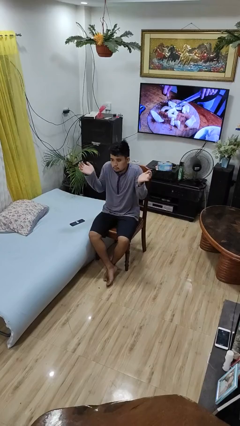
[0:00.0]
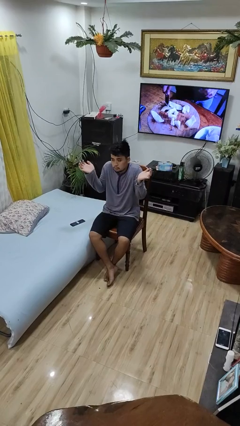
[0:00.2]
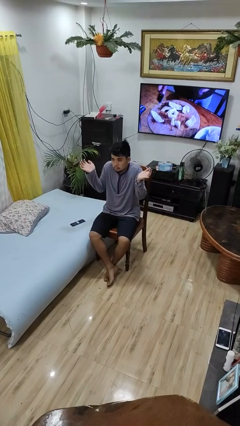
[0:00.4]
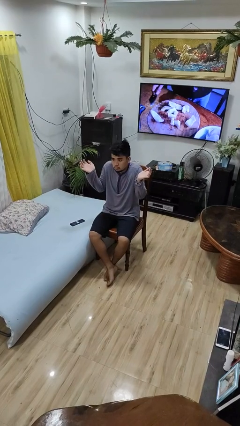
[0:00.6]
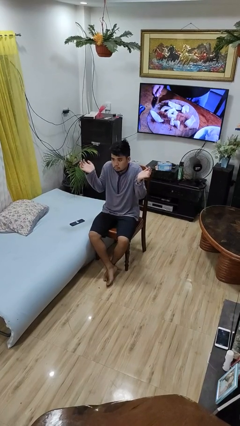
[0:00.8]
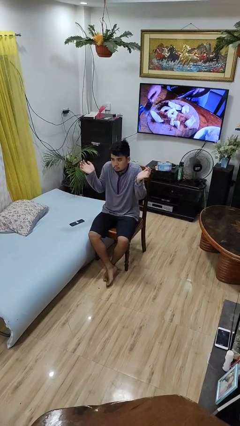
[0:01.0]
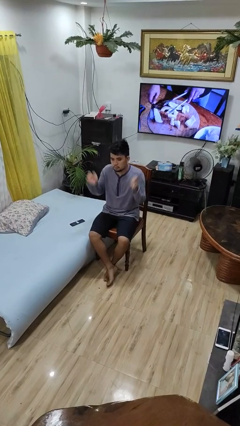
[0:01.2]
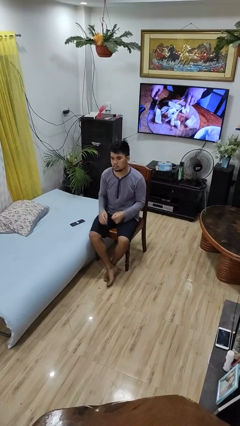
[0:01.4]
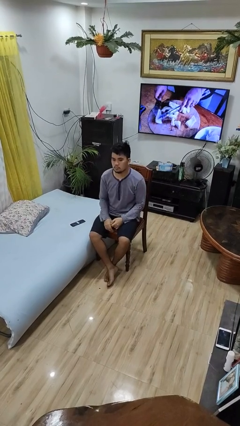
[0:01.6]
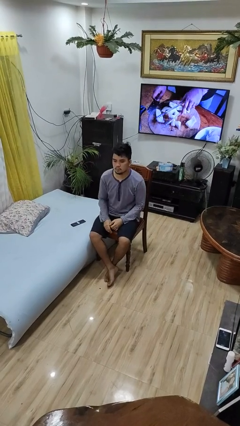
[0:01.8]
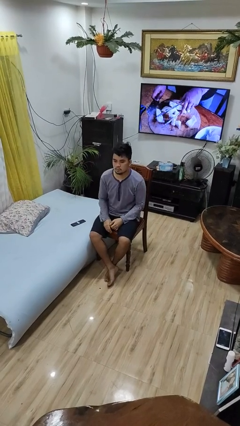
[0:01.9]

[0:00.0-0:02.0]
person shrugs

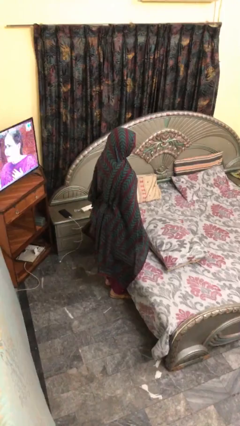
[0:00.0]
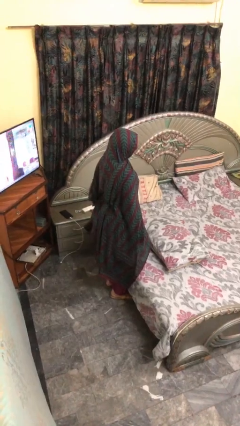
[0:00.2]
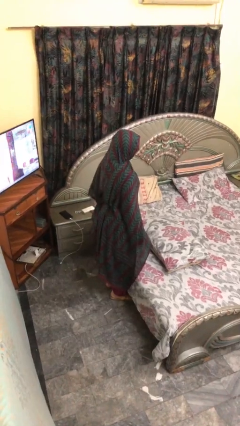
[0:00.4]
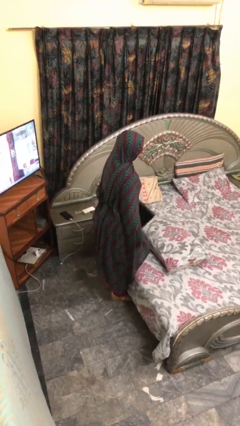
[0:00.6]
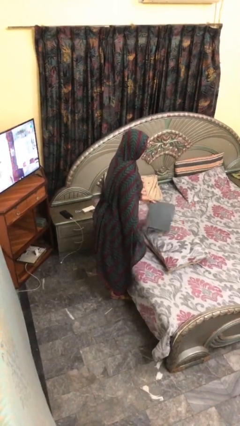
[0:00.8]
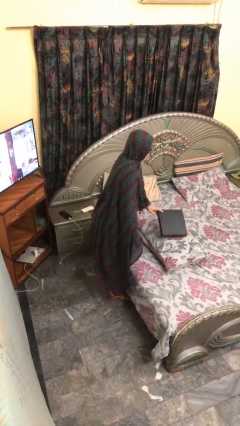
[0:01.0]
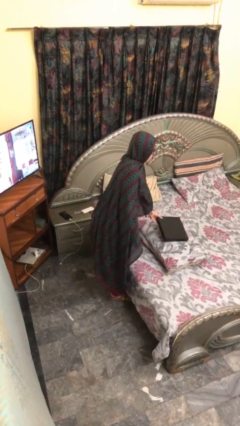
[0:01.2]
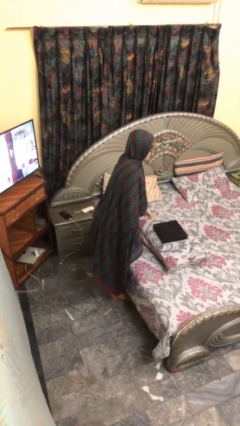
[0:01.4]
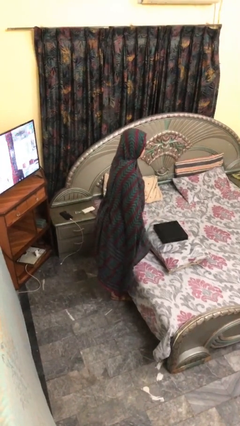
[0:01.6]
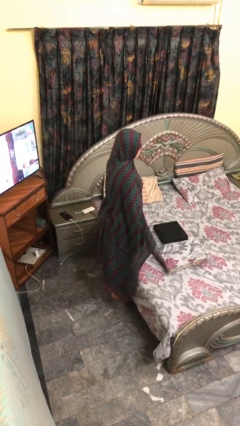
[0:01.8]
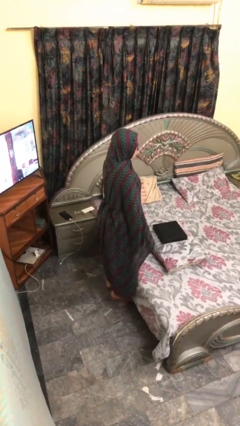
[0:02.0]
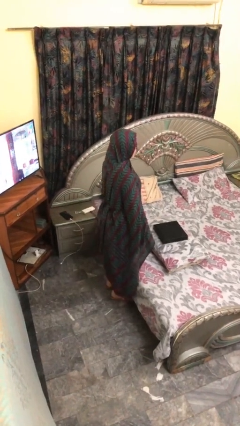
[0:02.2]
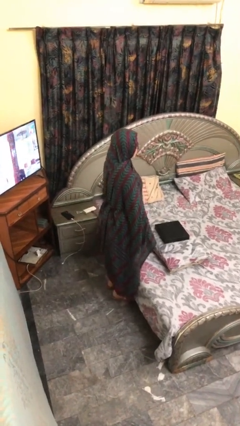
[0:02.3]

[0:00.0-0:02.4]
person puts down object on bed

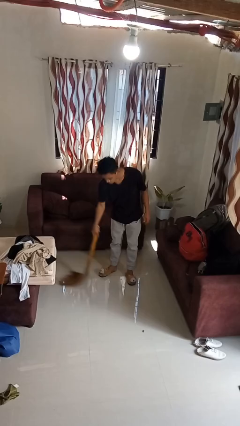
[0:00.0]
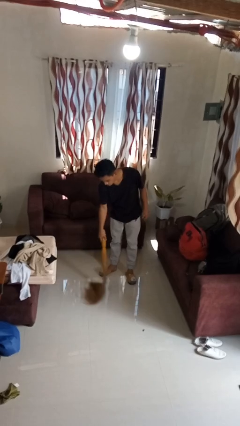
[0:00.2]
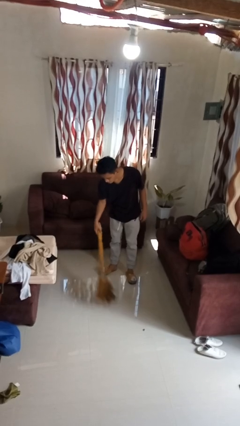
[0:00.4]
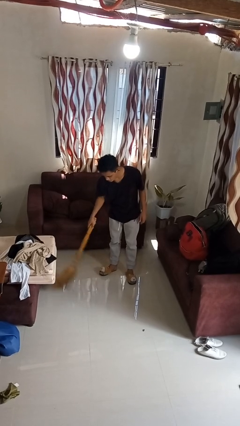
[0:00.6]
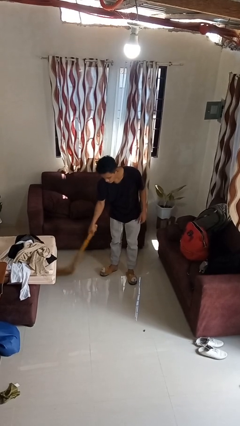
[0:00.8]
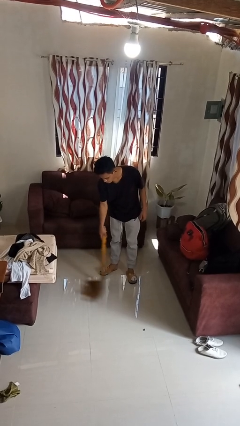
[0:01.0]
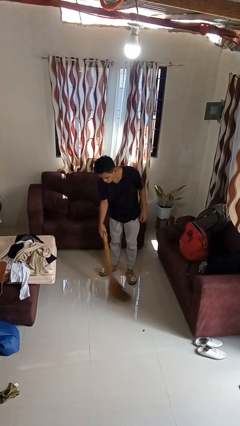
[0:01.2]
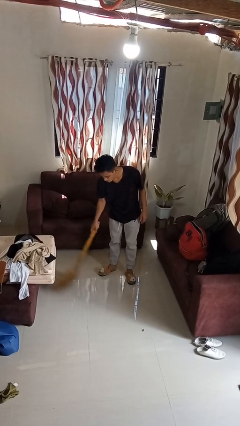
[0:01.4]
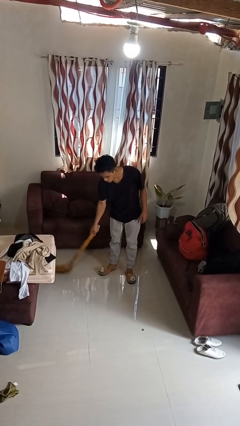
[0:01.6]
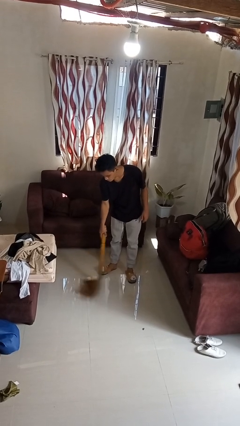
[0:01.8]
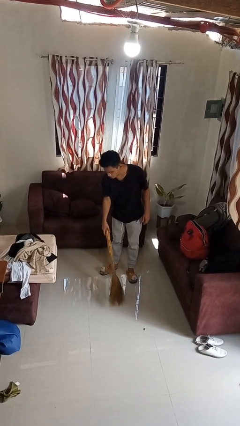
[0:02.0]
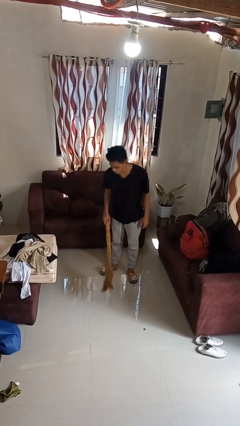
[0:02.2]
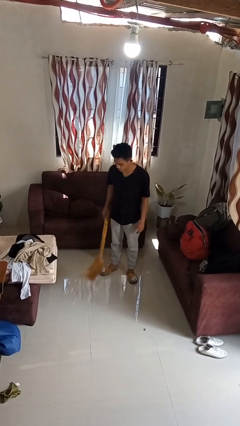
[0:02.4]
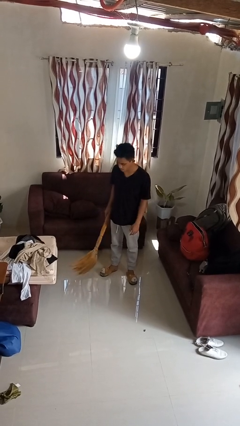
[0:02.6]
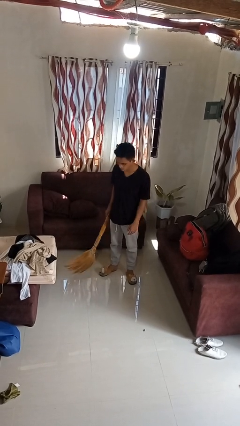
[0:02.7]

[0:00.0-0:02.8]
person sweeps floor

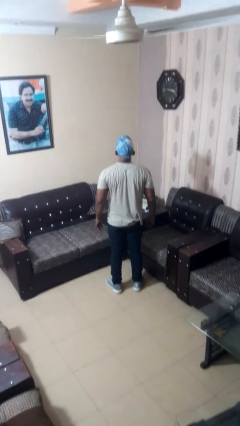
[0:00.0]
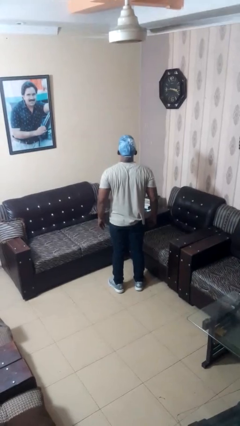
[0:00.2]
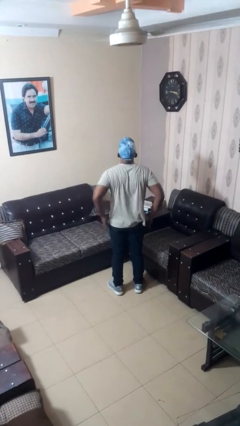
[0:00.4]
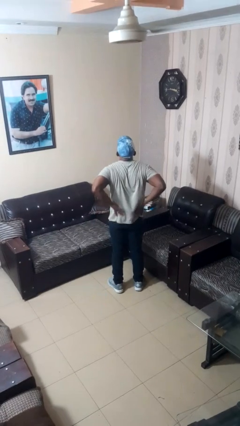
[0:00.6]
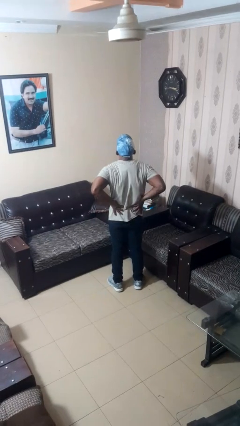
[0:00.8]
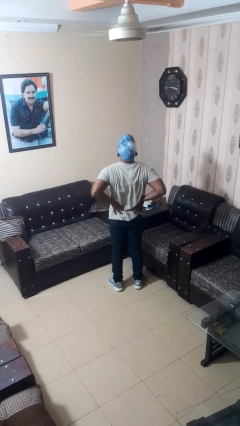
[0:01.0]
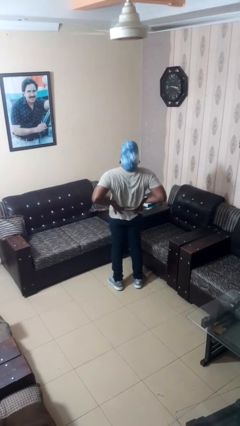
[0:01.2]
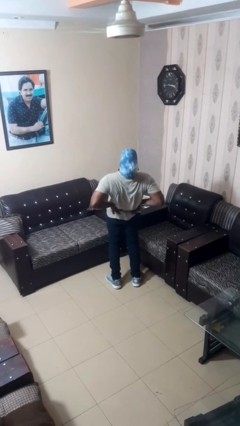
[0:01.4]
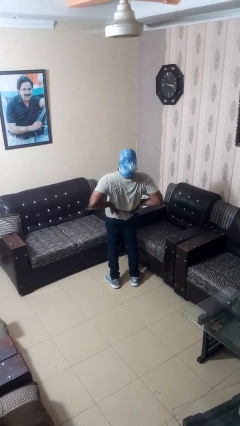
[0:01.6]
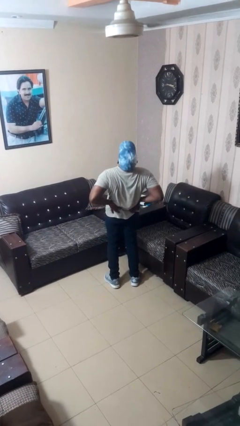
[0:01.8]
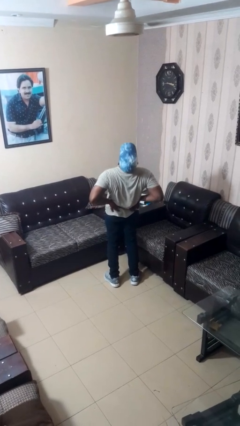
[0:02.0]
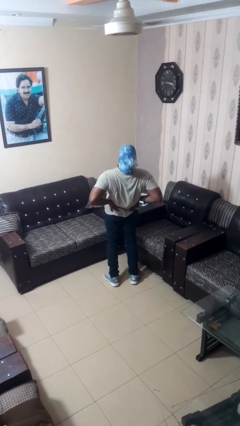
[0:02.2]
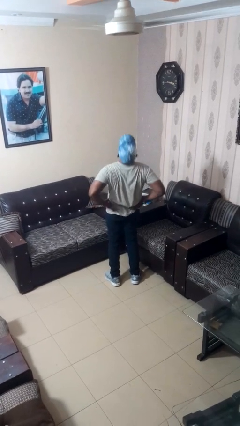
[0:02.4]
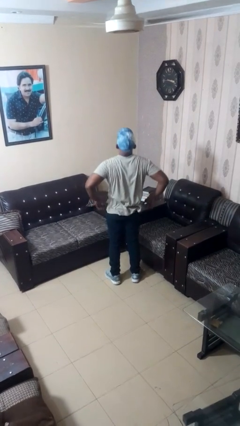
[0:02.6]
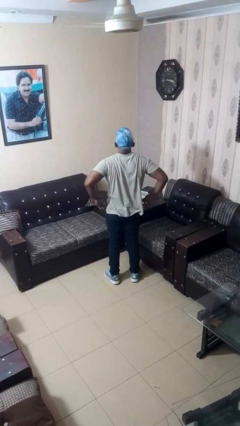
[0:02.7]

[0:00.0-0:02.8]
person stretches back

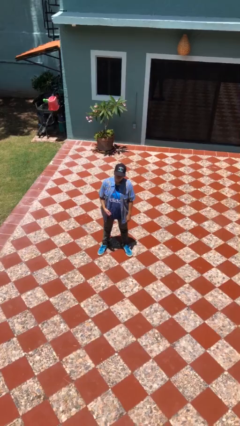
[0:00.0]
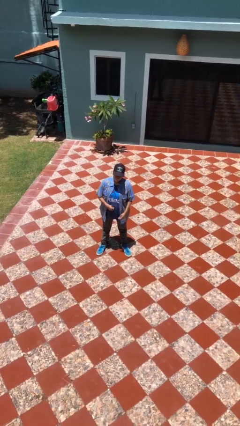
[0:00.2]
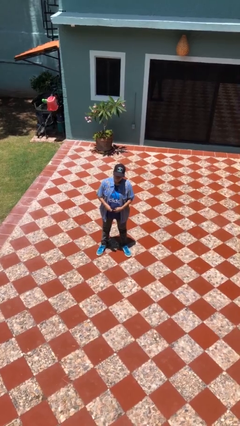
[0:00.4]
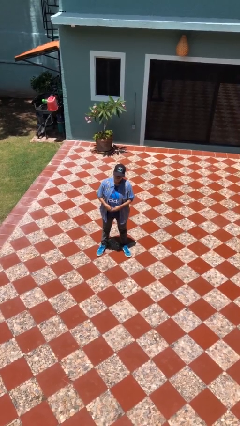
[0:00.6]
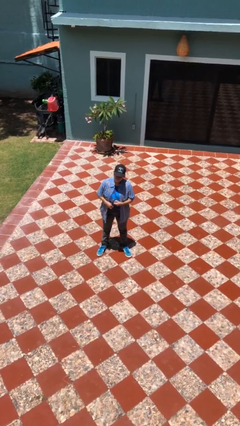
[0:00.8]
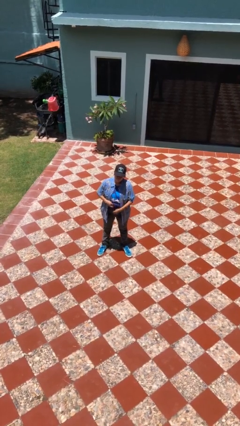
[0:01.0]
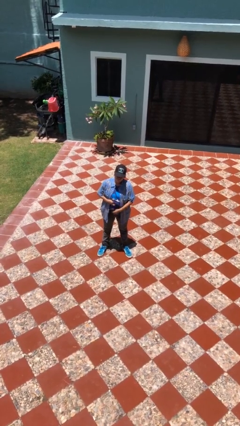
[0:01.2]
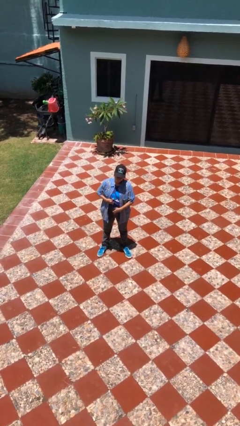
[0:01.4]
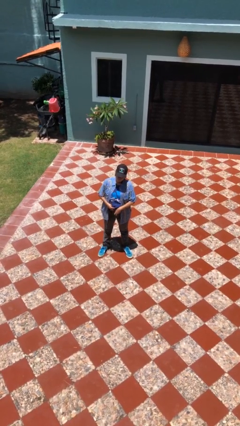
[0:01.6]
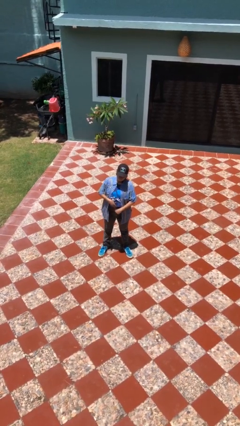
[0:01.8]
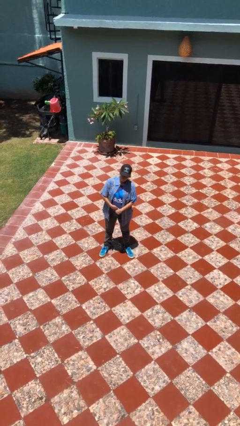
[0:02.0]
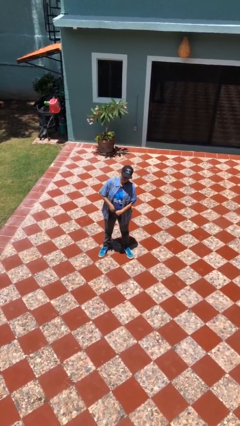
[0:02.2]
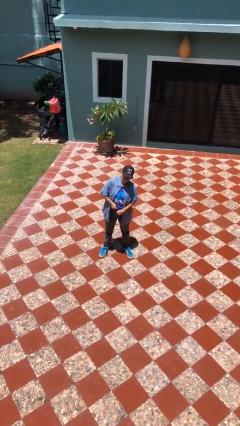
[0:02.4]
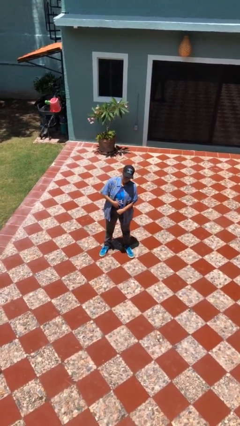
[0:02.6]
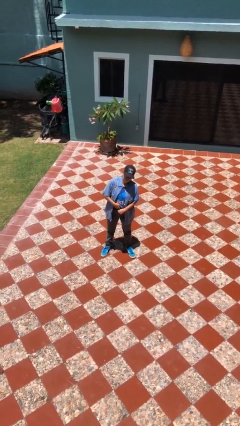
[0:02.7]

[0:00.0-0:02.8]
person tucks in shirt

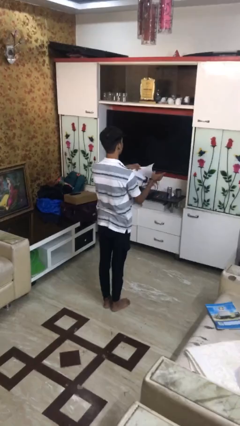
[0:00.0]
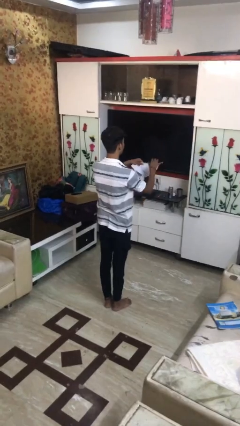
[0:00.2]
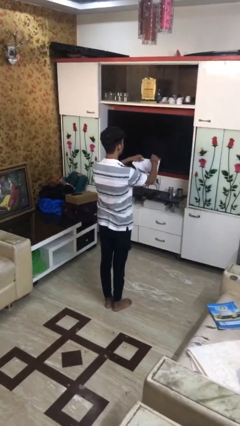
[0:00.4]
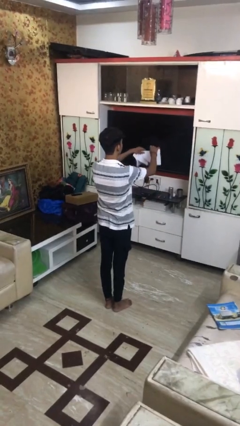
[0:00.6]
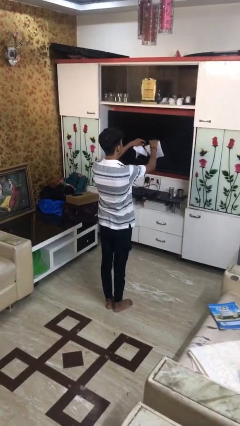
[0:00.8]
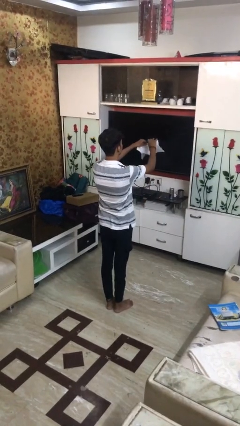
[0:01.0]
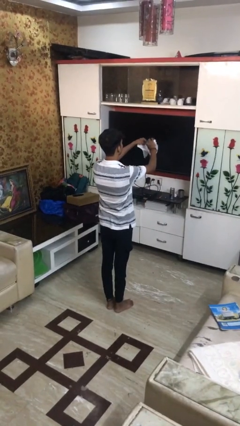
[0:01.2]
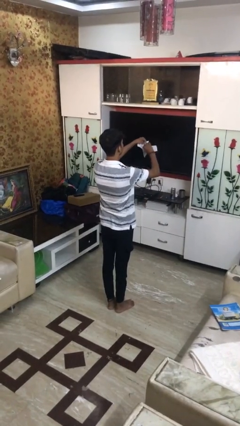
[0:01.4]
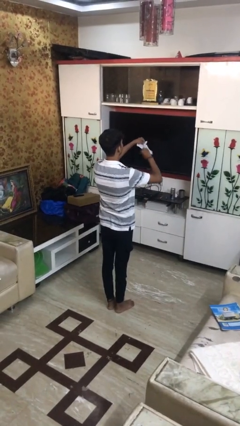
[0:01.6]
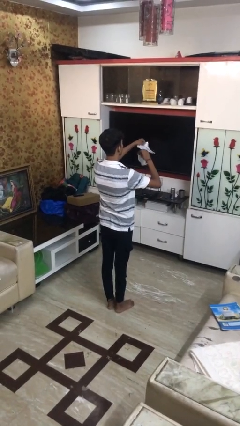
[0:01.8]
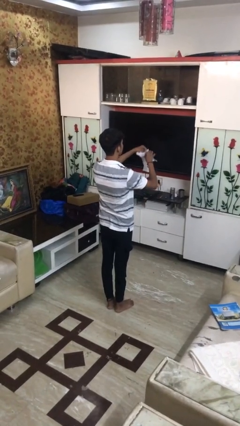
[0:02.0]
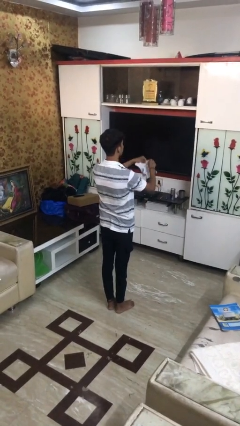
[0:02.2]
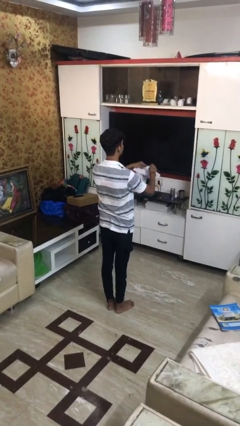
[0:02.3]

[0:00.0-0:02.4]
person tears paper

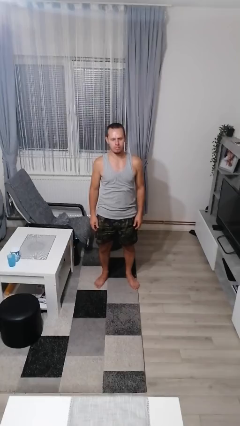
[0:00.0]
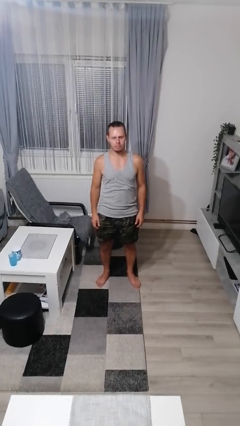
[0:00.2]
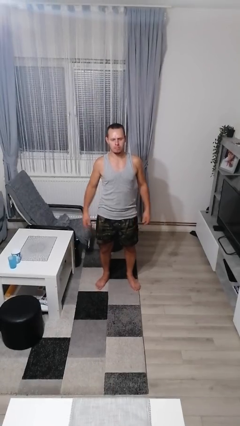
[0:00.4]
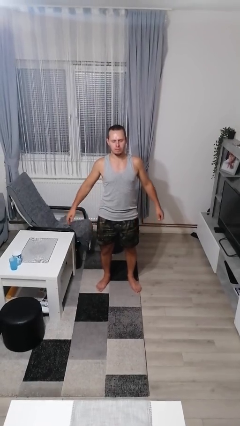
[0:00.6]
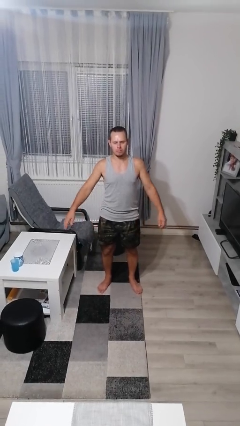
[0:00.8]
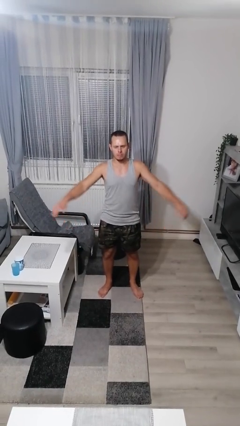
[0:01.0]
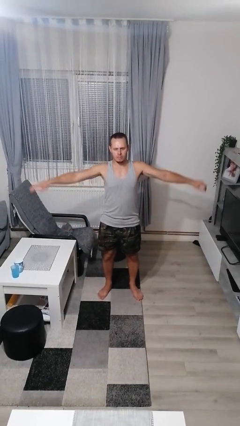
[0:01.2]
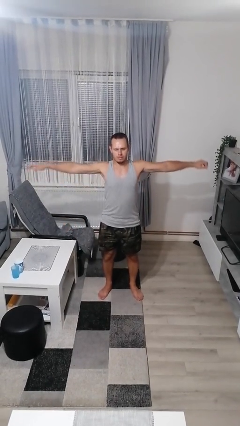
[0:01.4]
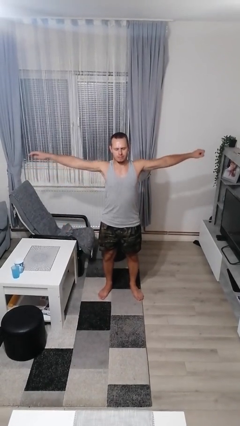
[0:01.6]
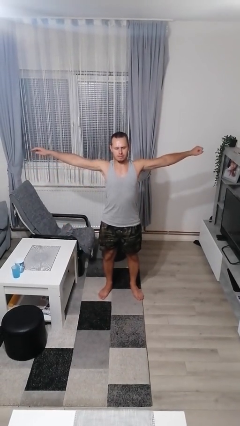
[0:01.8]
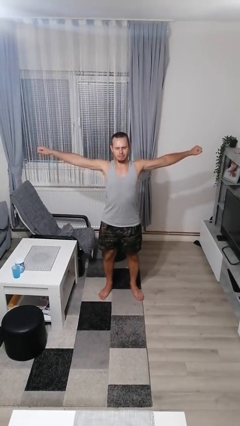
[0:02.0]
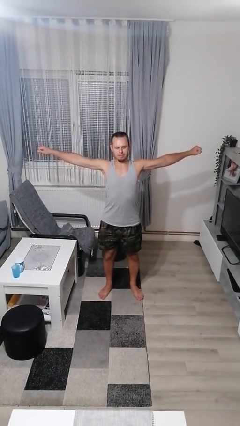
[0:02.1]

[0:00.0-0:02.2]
person stretches arms to side
